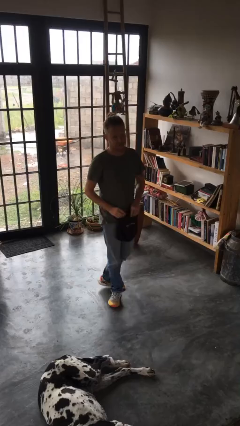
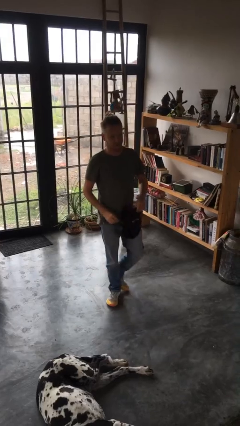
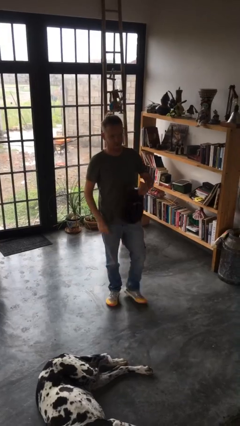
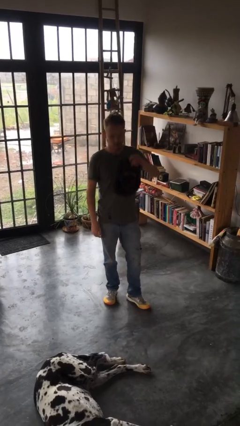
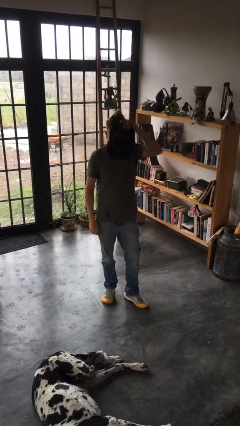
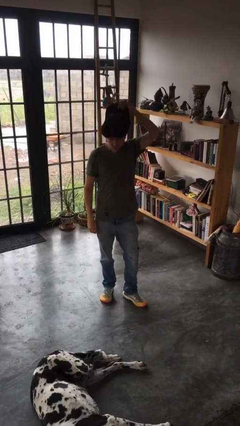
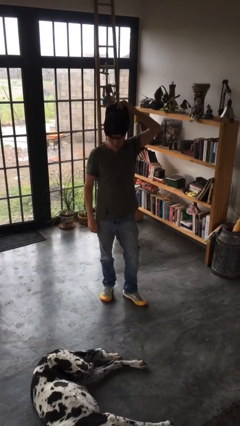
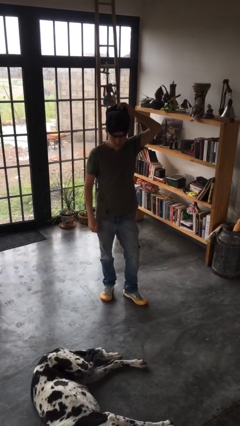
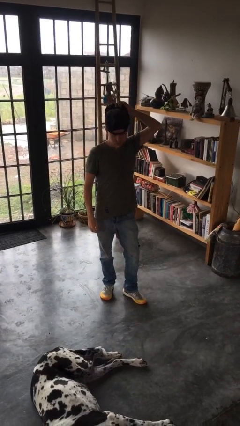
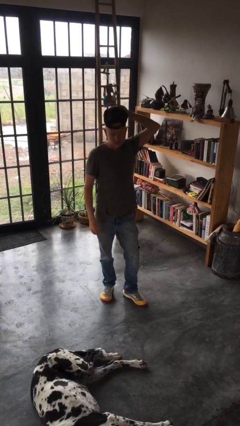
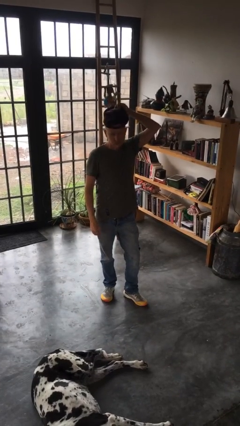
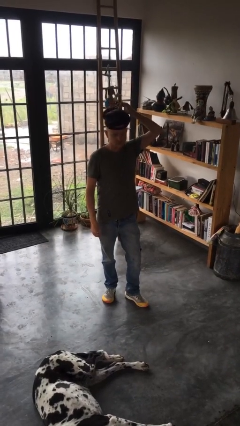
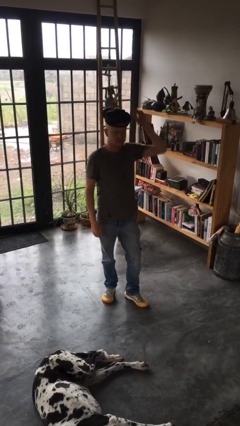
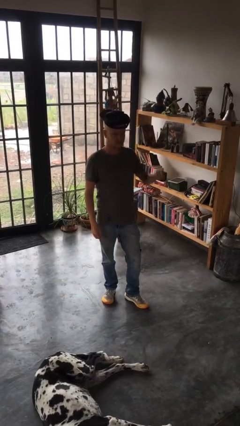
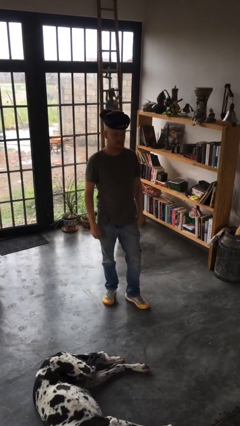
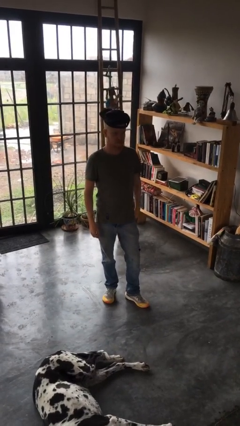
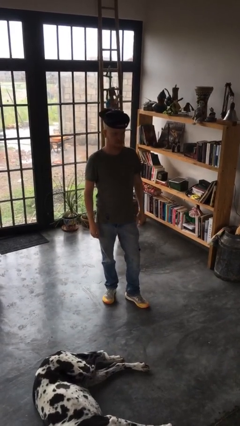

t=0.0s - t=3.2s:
person puts on hat

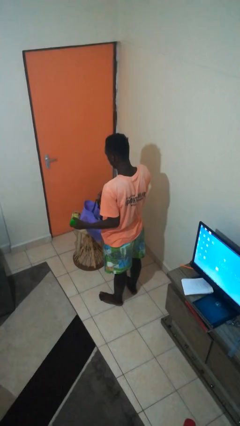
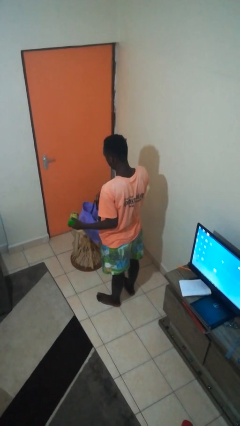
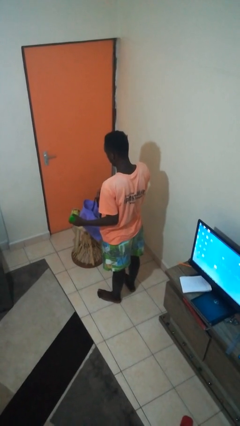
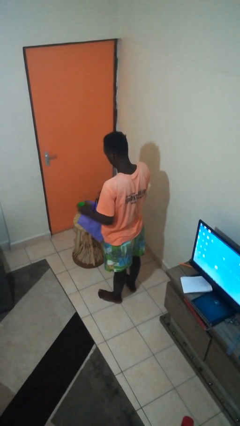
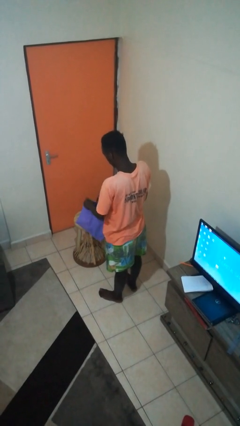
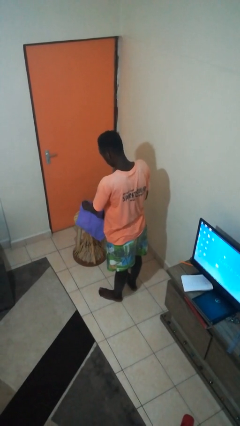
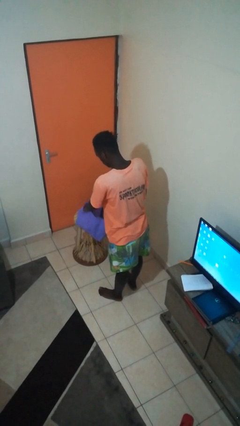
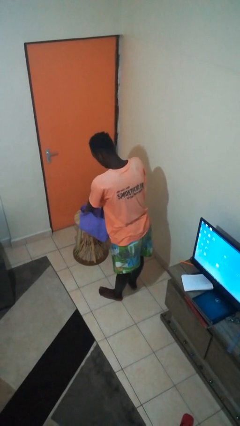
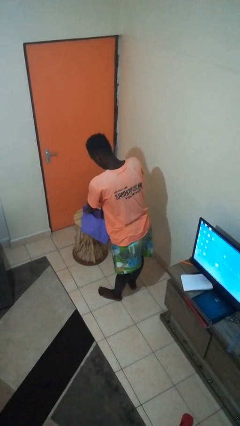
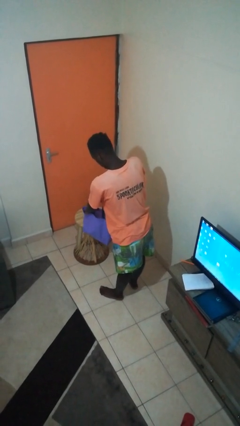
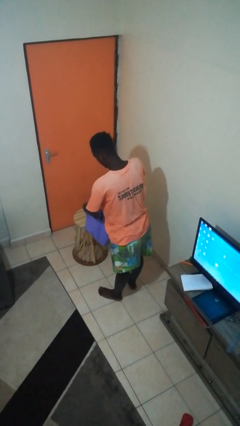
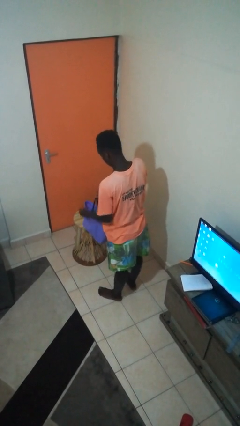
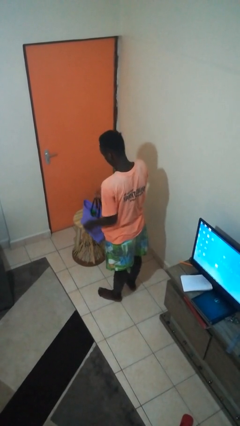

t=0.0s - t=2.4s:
person puts object into bag

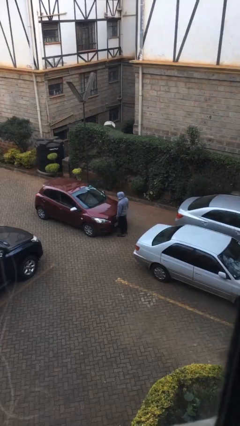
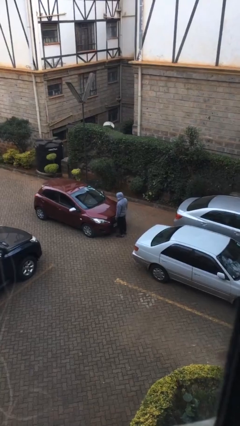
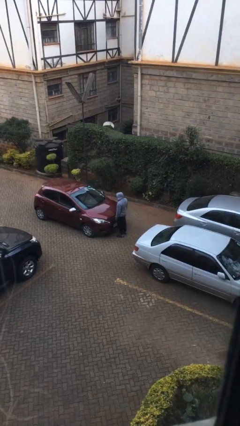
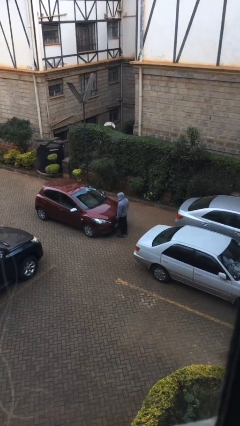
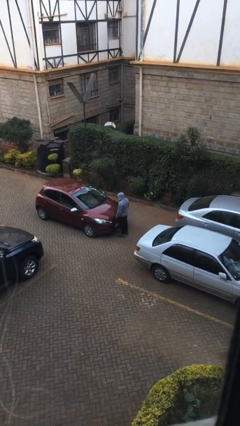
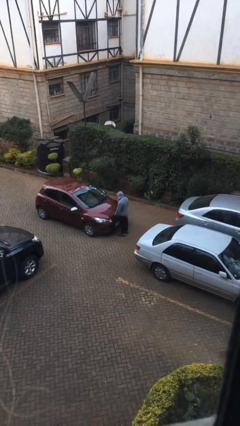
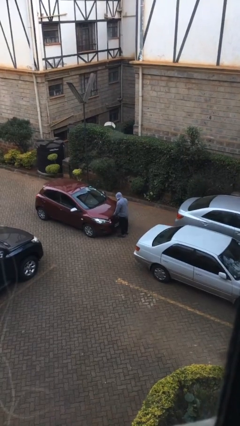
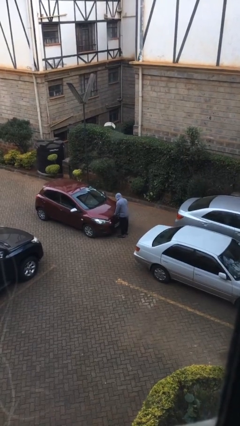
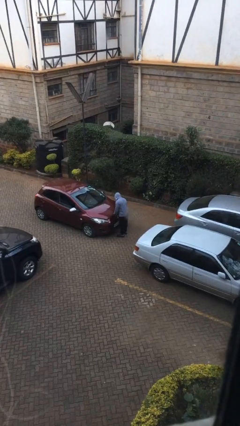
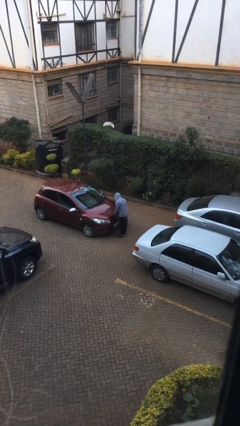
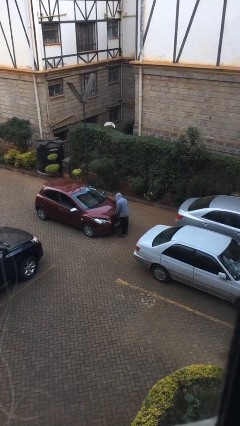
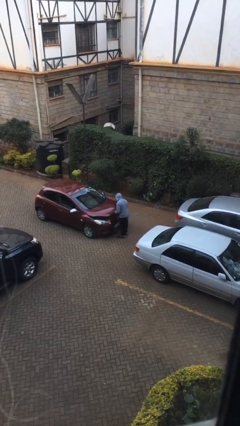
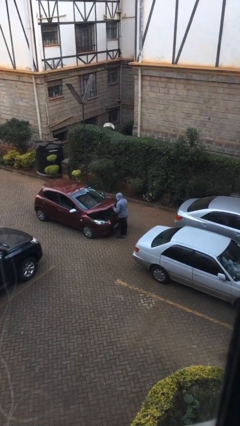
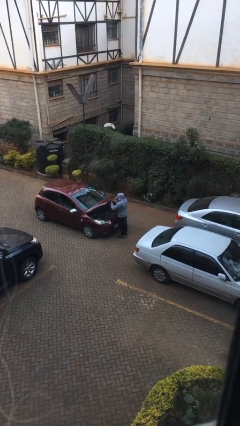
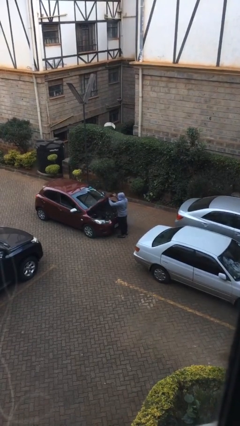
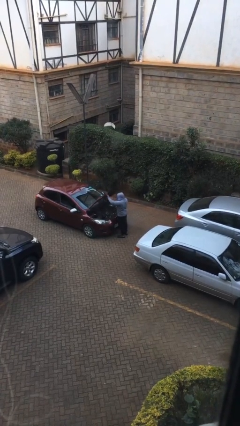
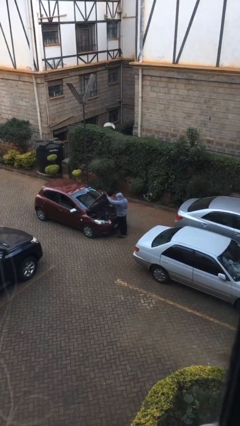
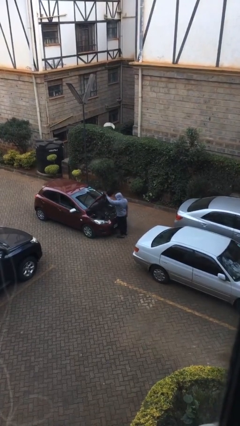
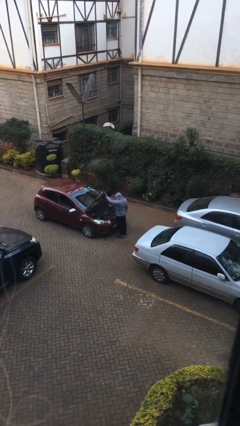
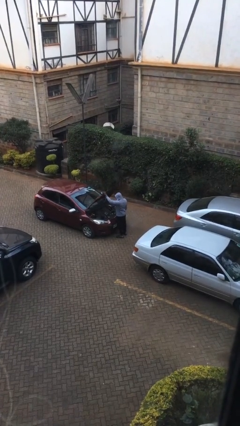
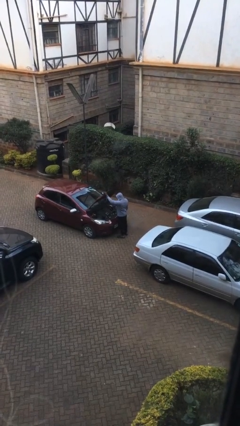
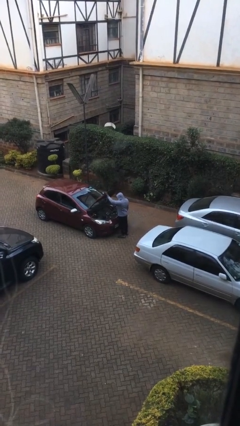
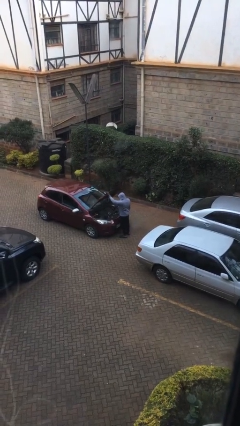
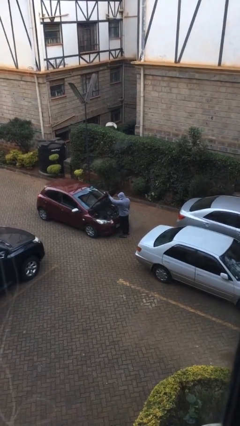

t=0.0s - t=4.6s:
person opens car hood

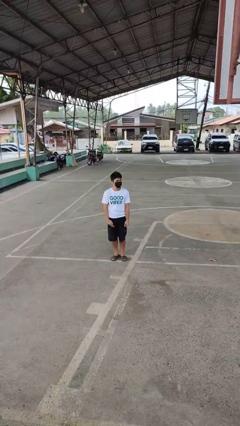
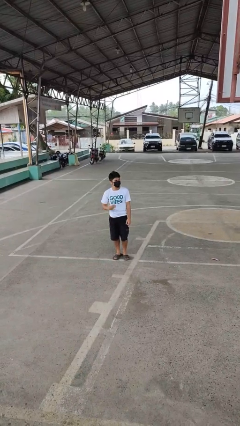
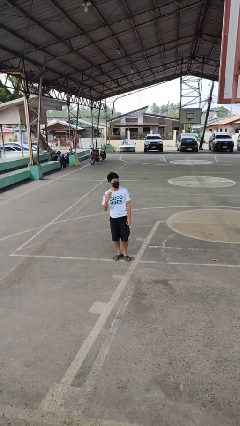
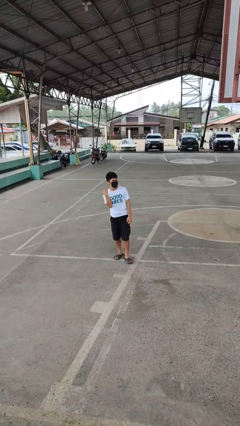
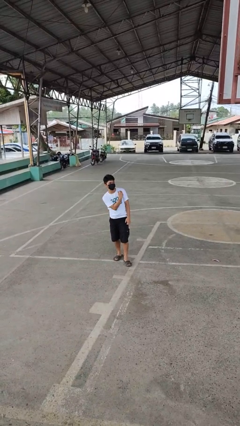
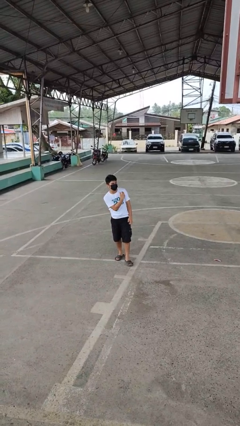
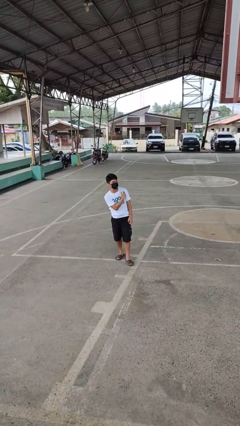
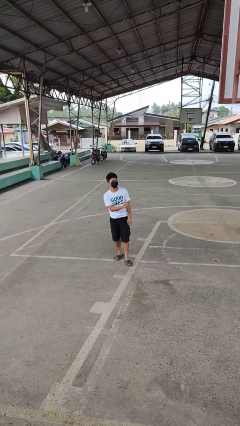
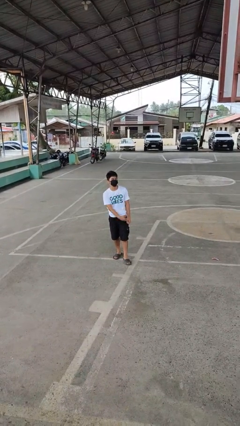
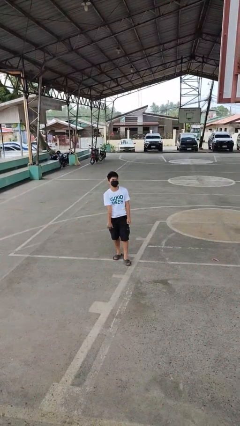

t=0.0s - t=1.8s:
person gestures cut

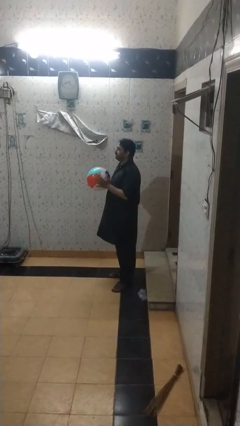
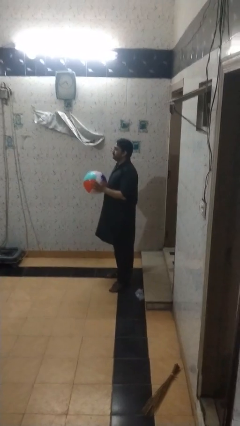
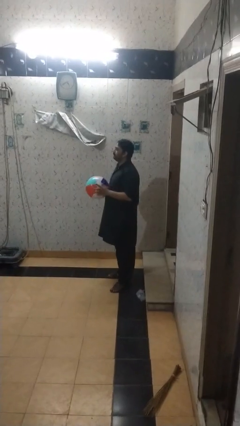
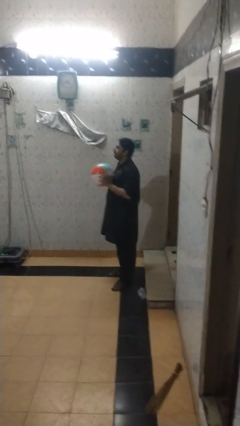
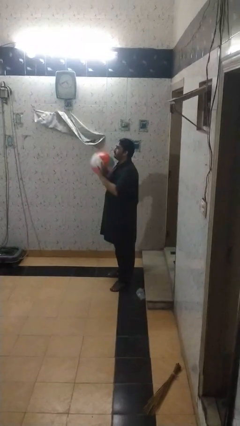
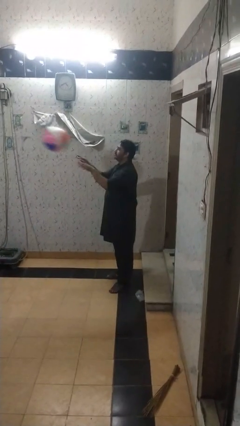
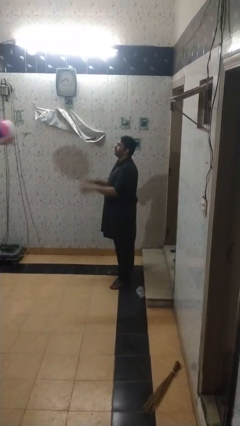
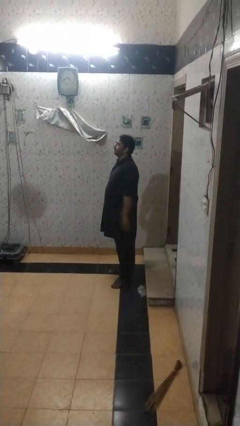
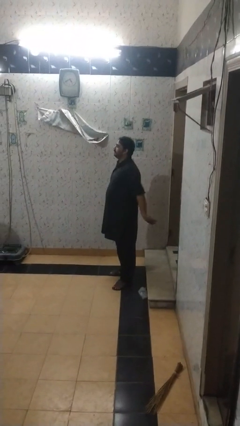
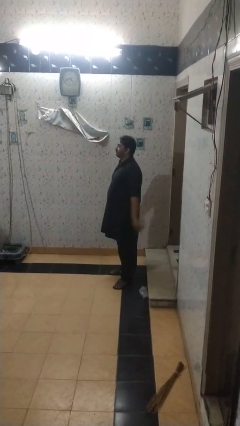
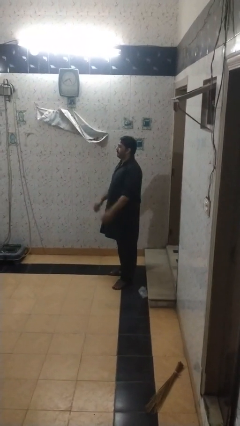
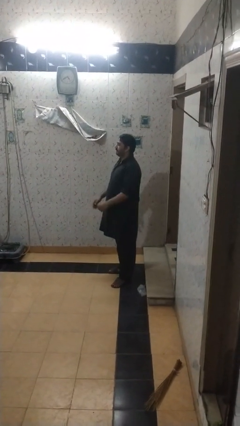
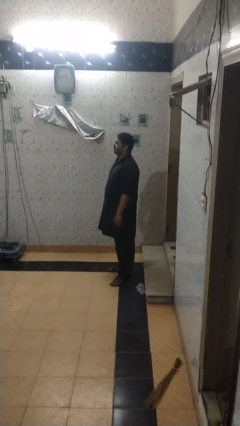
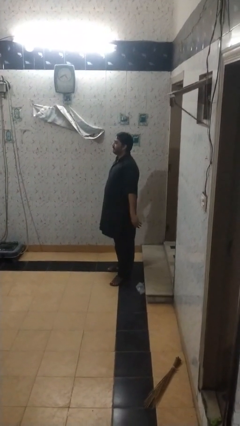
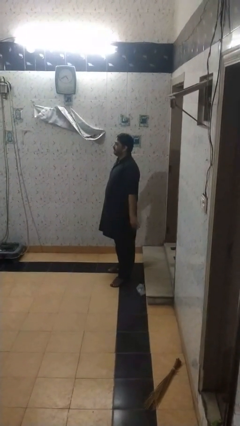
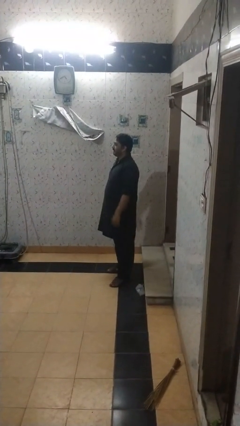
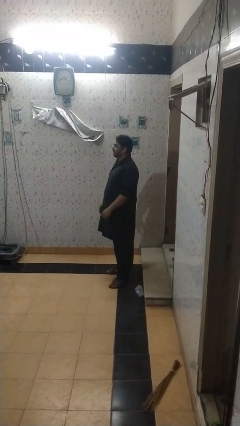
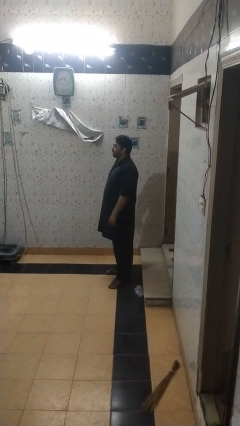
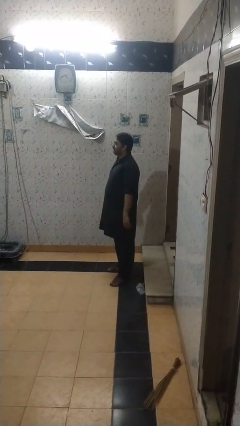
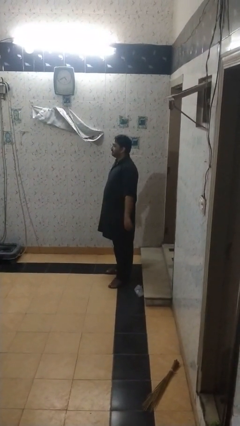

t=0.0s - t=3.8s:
person throws object to person

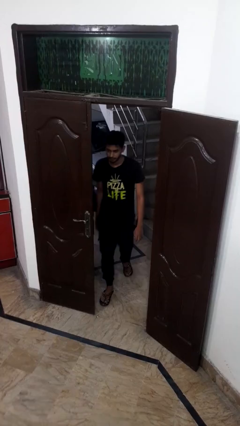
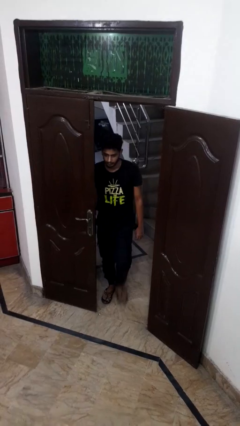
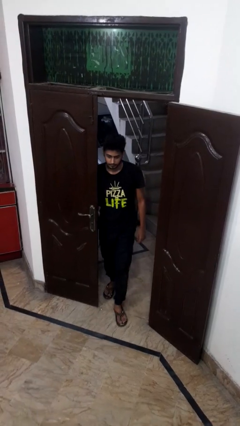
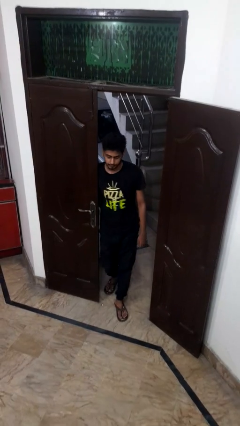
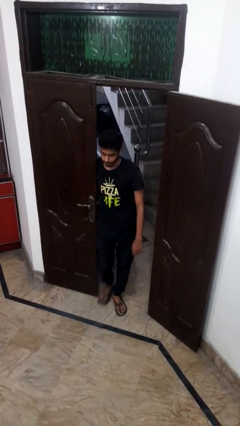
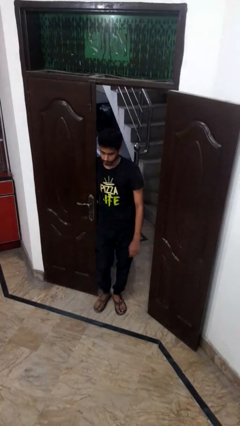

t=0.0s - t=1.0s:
person bumps into wall

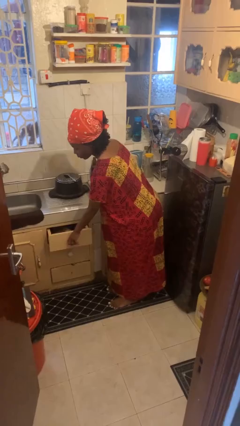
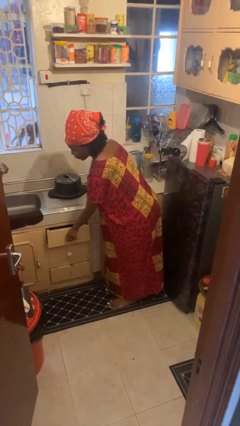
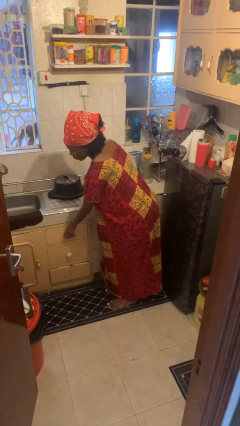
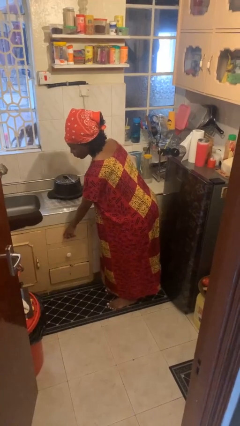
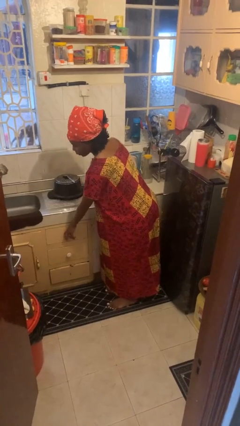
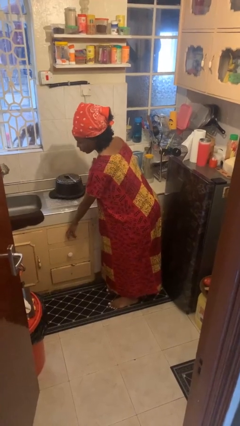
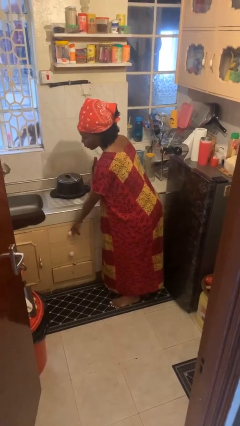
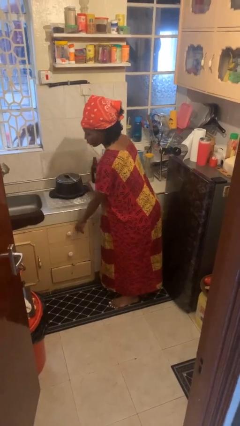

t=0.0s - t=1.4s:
person closes kitchen drawer
